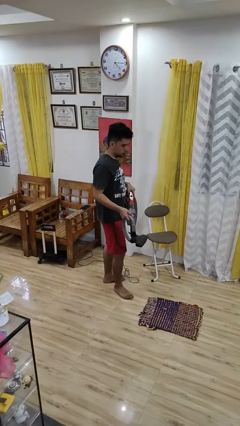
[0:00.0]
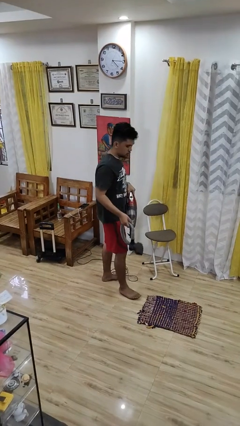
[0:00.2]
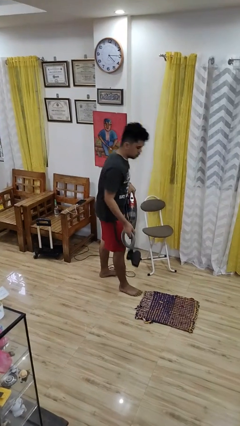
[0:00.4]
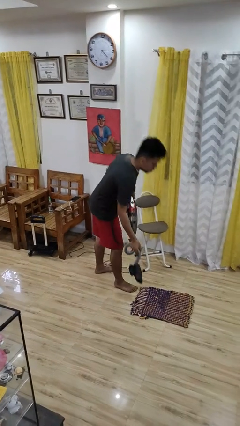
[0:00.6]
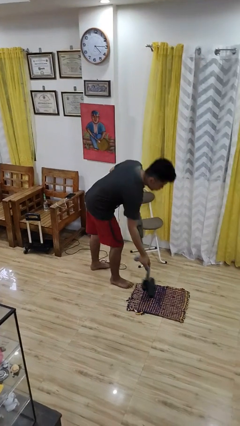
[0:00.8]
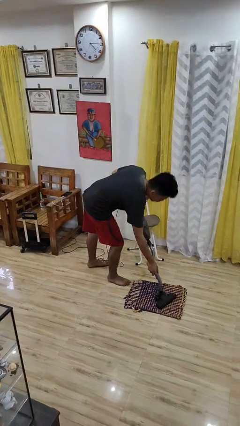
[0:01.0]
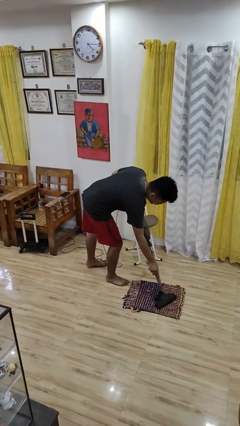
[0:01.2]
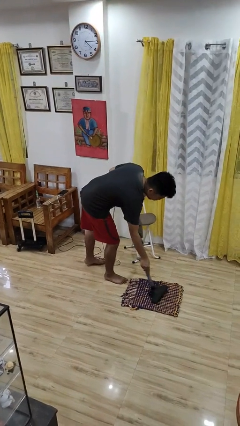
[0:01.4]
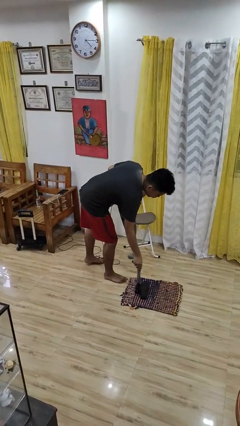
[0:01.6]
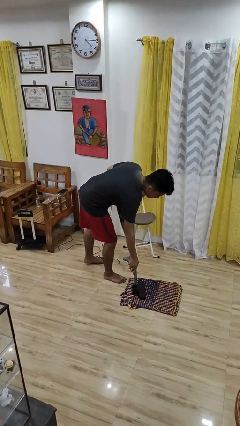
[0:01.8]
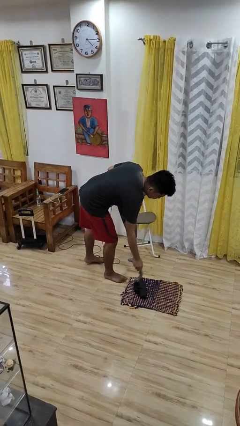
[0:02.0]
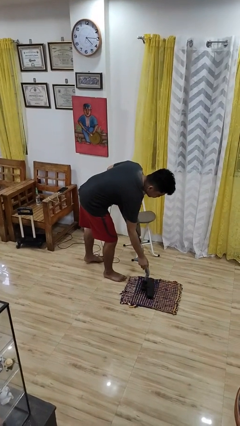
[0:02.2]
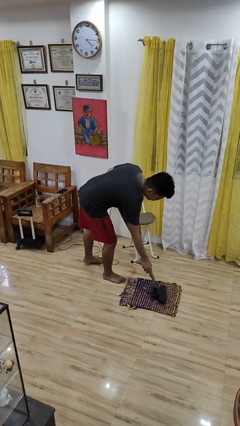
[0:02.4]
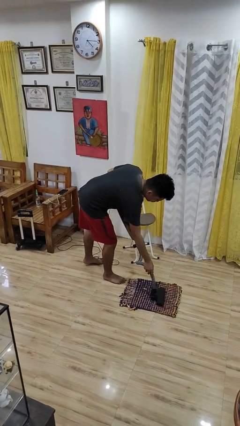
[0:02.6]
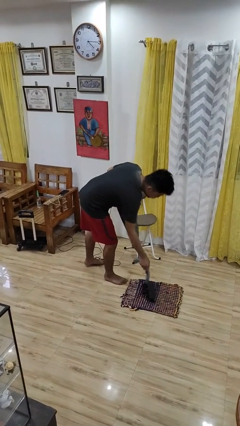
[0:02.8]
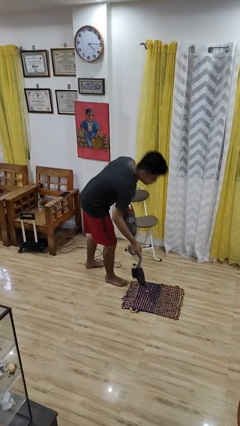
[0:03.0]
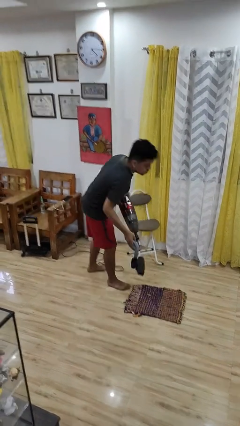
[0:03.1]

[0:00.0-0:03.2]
person vacuums carpet

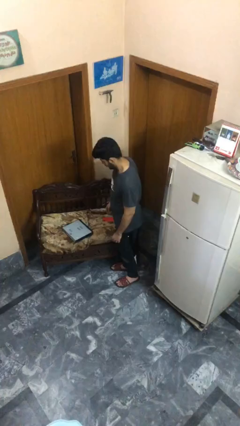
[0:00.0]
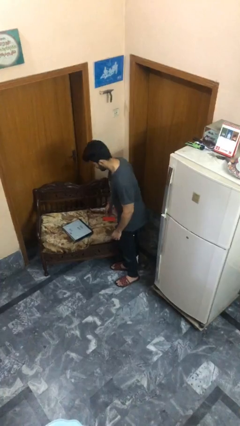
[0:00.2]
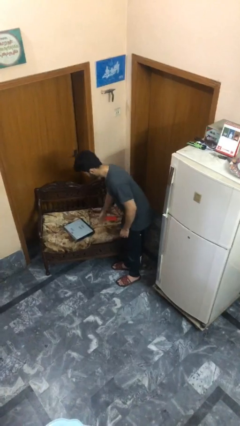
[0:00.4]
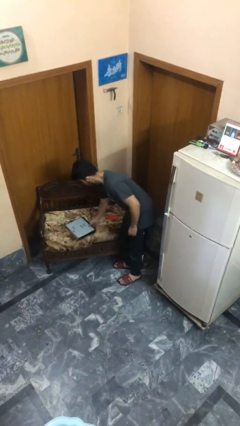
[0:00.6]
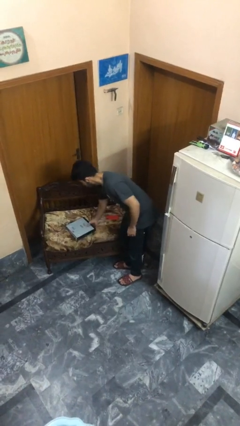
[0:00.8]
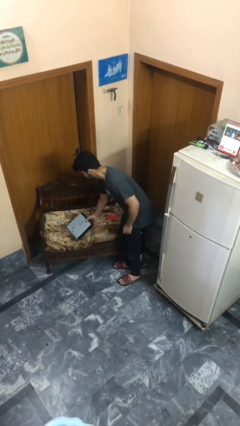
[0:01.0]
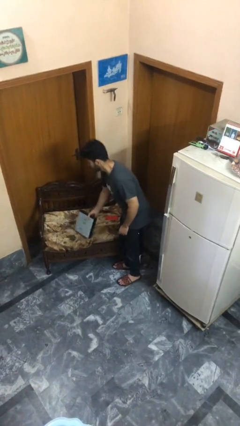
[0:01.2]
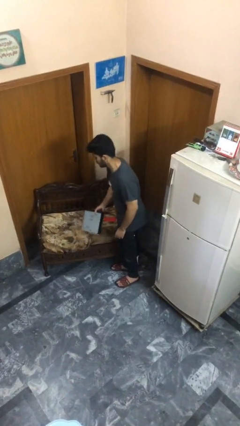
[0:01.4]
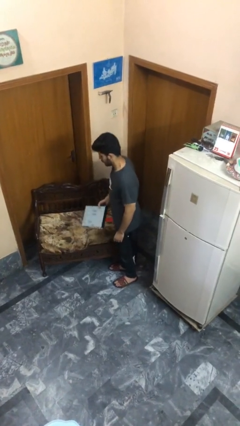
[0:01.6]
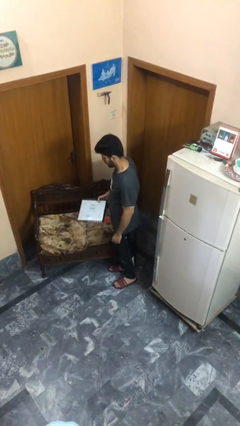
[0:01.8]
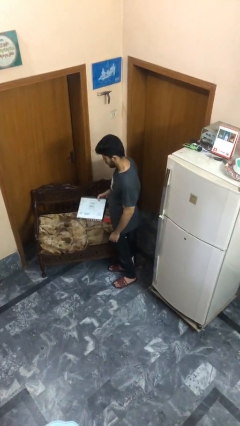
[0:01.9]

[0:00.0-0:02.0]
person picks up object from couch

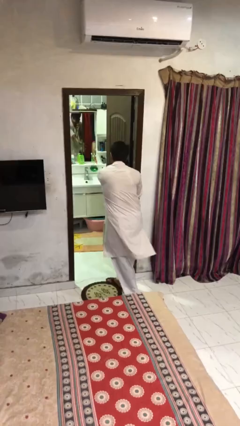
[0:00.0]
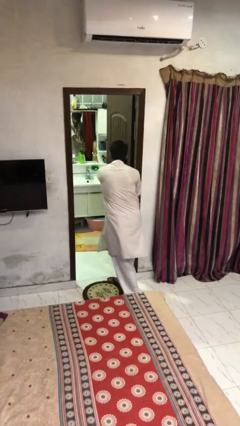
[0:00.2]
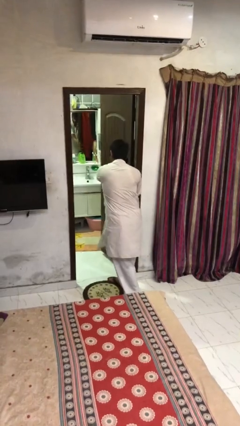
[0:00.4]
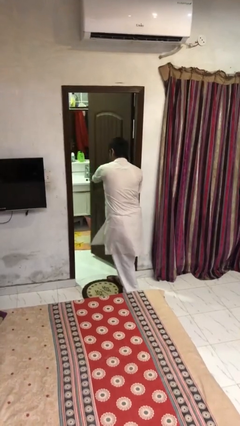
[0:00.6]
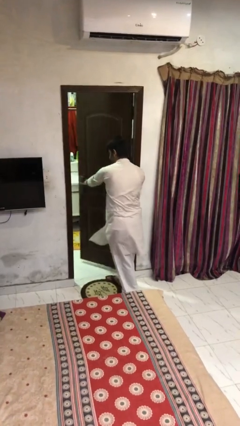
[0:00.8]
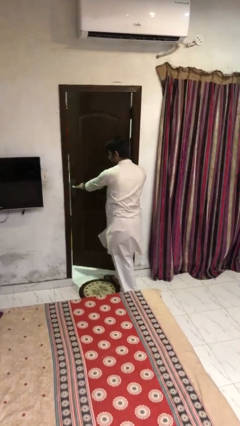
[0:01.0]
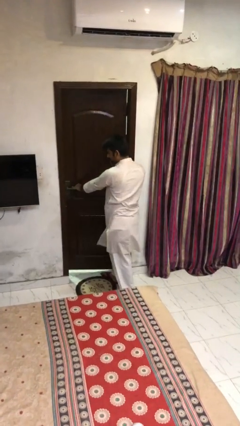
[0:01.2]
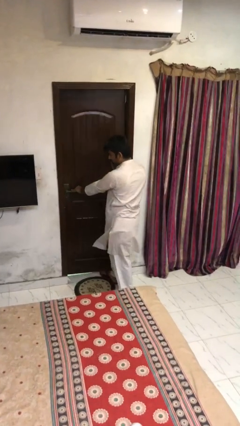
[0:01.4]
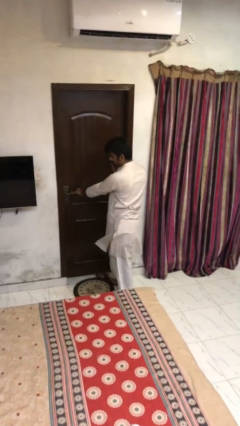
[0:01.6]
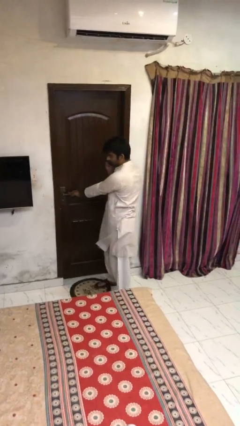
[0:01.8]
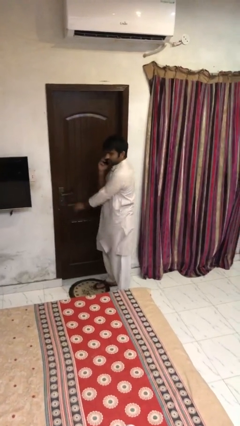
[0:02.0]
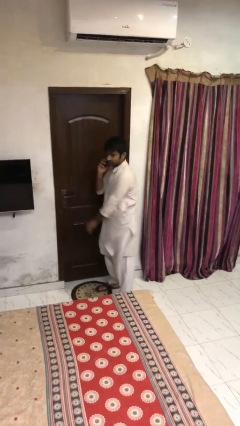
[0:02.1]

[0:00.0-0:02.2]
person closes facility door

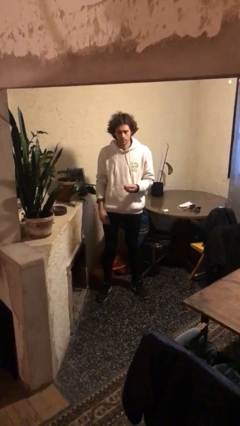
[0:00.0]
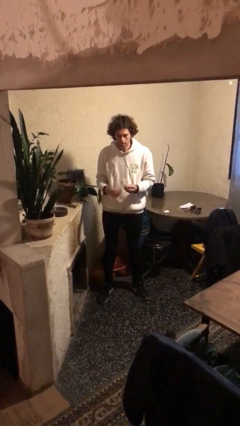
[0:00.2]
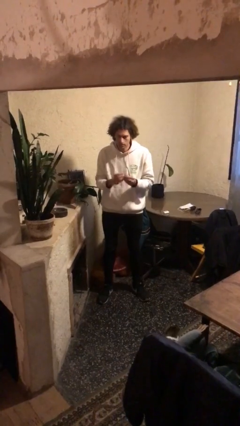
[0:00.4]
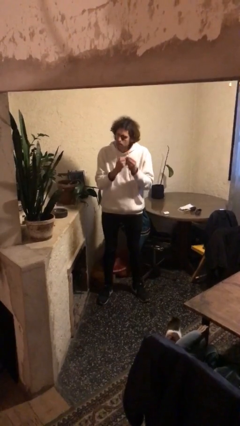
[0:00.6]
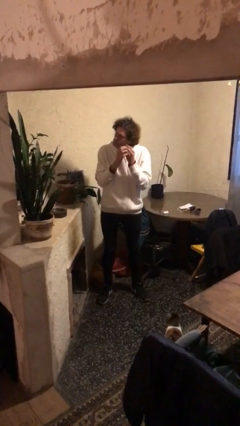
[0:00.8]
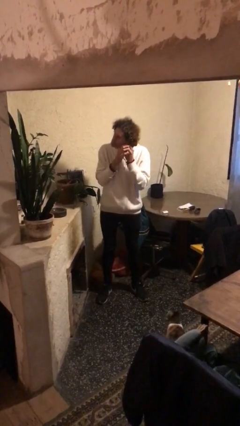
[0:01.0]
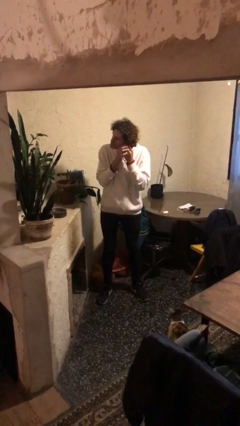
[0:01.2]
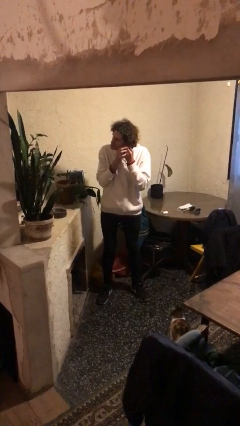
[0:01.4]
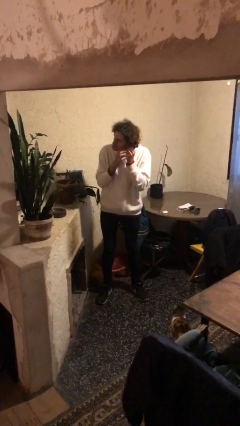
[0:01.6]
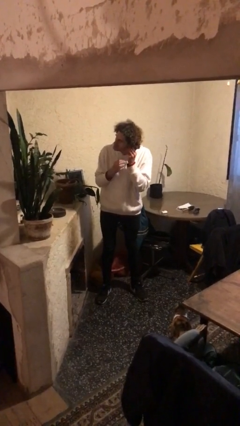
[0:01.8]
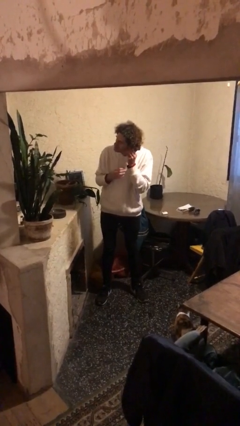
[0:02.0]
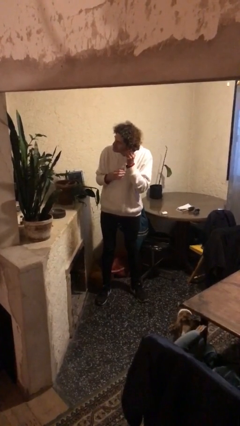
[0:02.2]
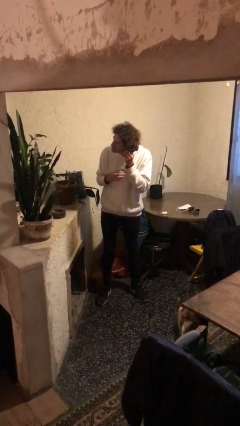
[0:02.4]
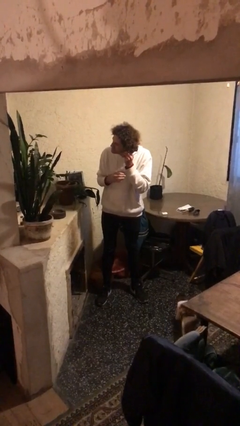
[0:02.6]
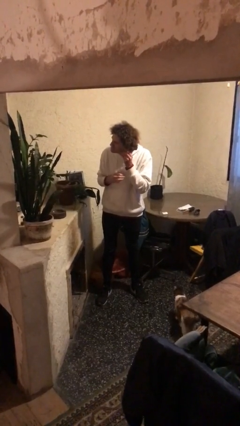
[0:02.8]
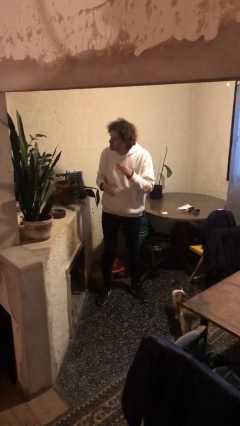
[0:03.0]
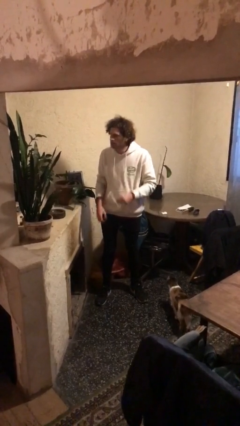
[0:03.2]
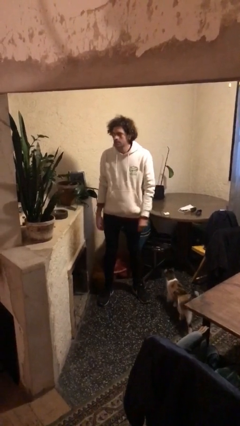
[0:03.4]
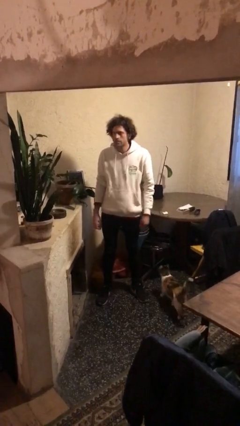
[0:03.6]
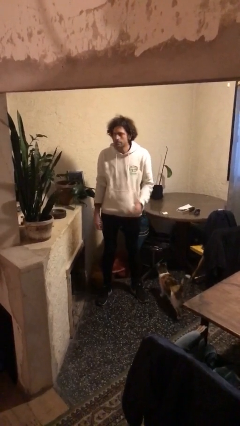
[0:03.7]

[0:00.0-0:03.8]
person puts on earrings

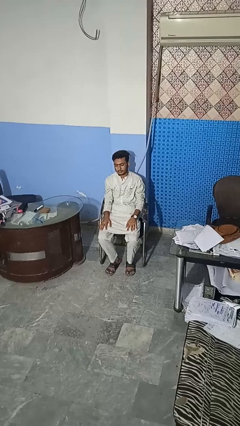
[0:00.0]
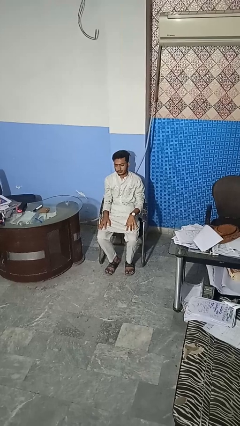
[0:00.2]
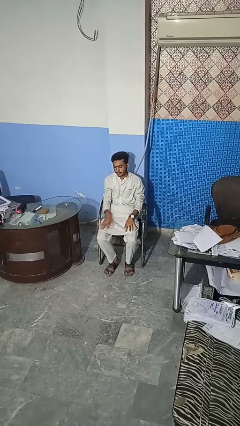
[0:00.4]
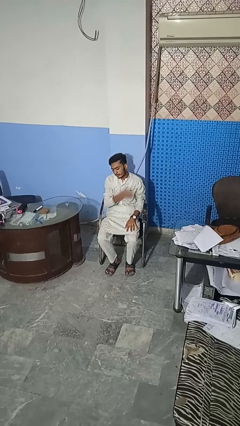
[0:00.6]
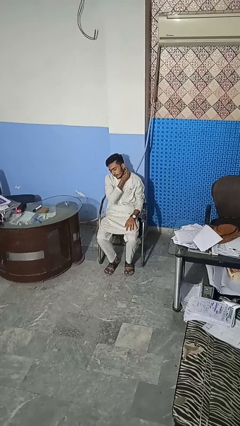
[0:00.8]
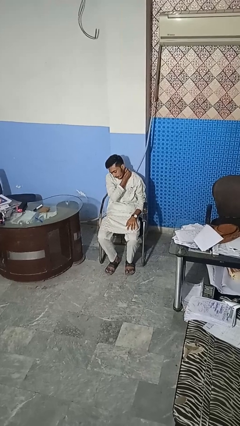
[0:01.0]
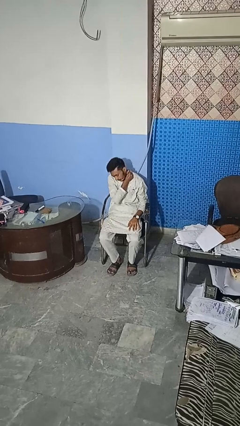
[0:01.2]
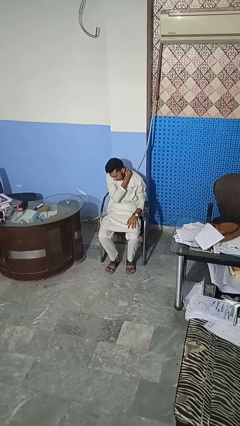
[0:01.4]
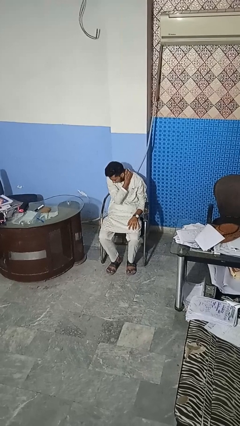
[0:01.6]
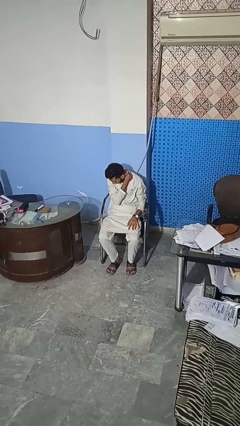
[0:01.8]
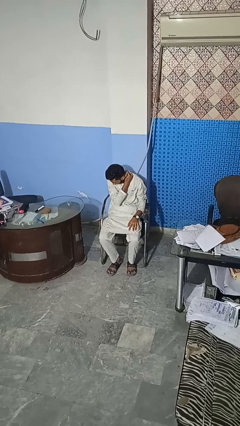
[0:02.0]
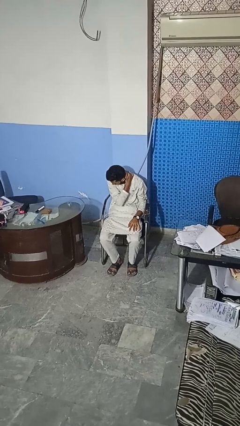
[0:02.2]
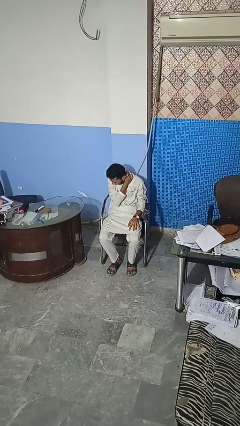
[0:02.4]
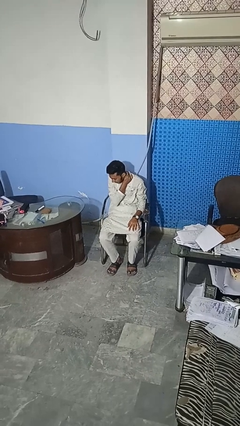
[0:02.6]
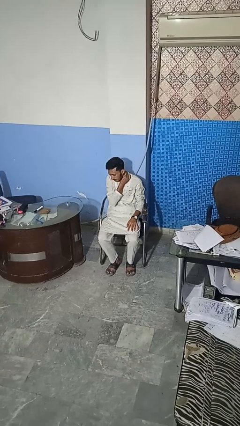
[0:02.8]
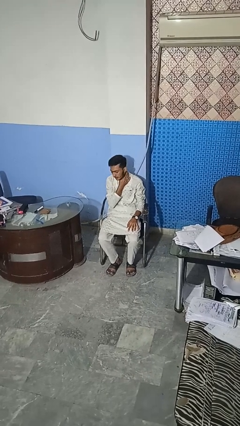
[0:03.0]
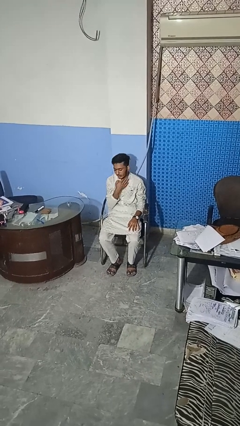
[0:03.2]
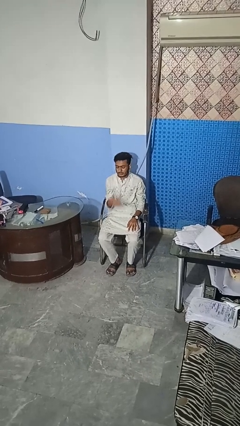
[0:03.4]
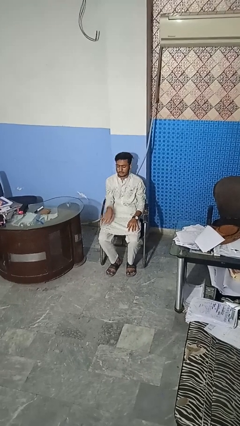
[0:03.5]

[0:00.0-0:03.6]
person rubs neck

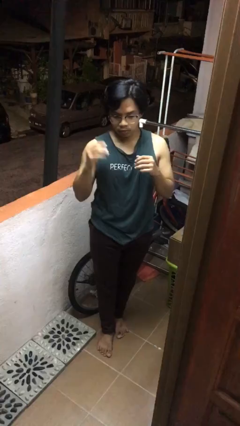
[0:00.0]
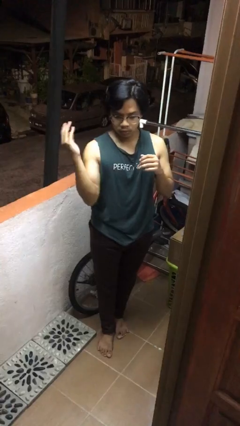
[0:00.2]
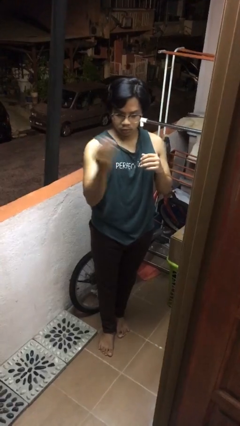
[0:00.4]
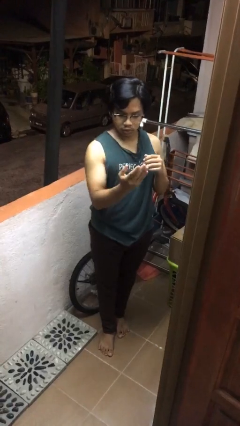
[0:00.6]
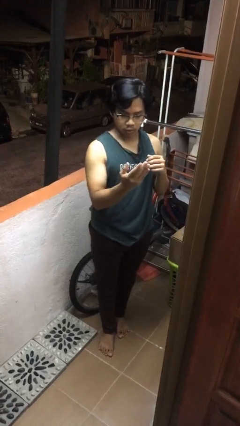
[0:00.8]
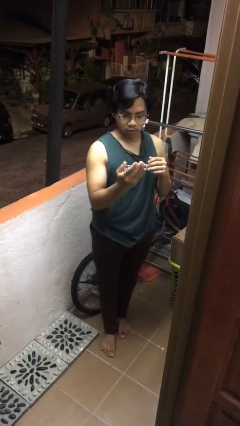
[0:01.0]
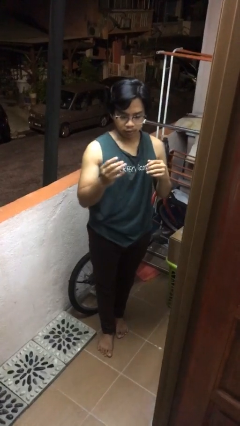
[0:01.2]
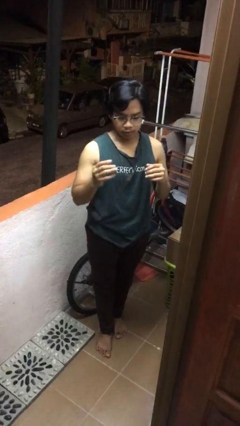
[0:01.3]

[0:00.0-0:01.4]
person karate chop

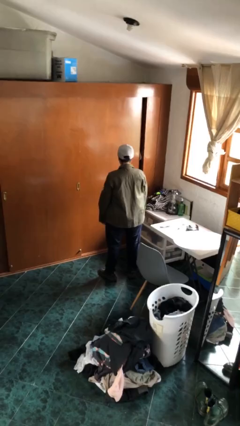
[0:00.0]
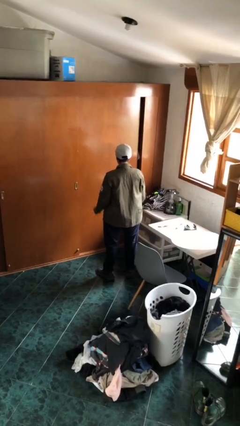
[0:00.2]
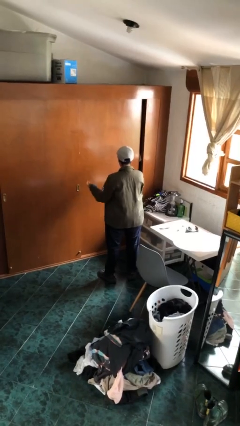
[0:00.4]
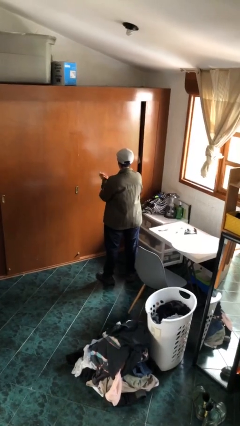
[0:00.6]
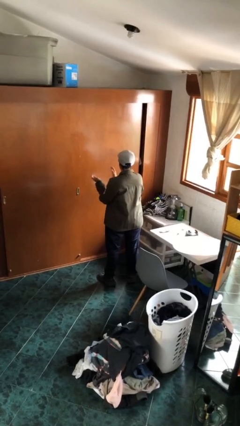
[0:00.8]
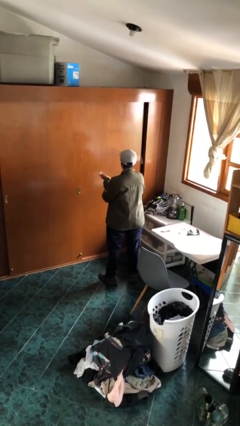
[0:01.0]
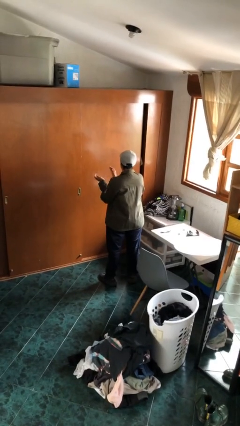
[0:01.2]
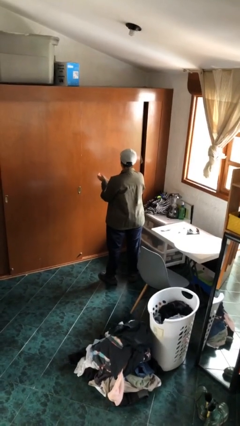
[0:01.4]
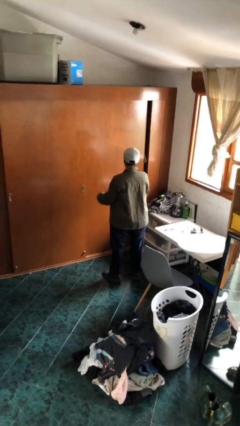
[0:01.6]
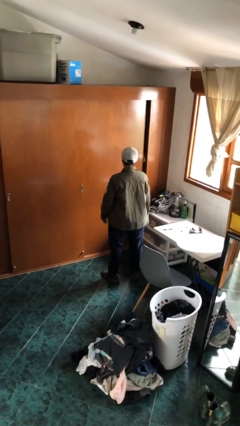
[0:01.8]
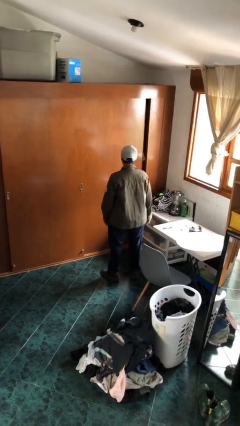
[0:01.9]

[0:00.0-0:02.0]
person claps hands
